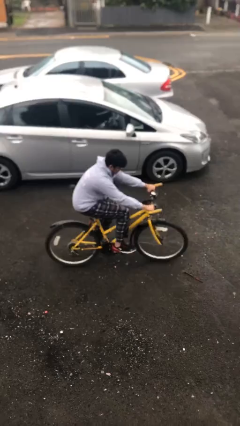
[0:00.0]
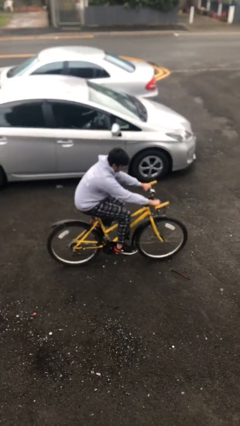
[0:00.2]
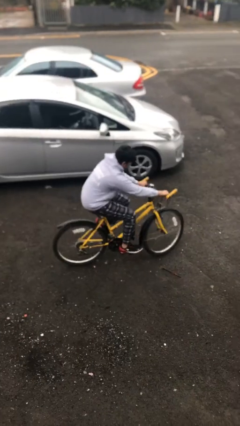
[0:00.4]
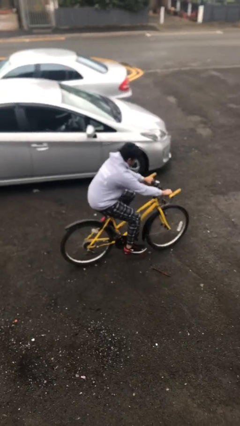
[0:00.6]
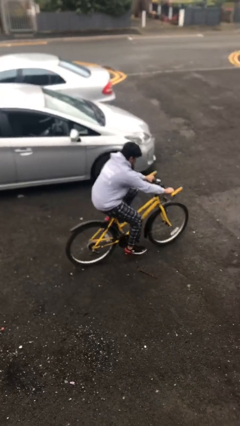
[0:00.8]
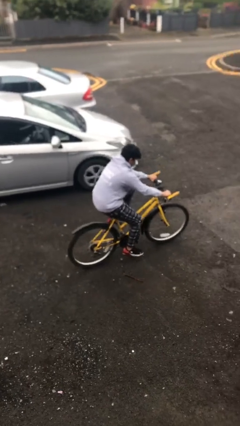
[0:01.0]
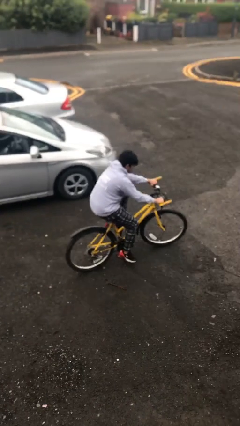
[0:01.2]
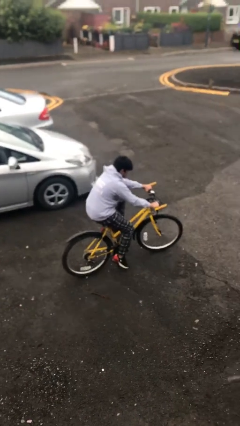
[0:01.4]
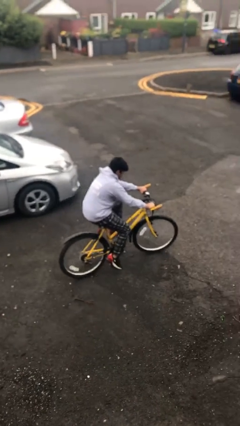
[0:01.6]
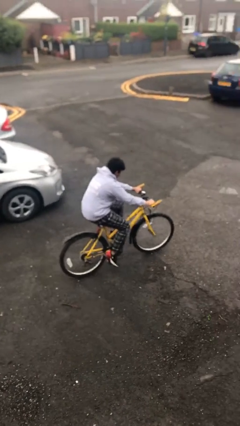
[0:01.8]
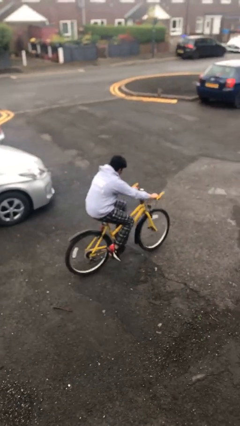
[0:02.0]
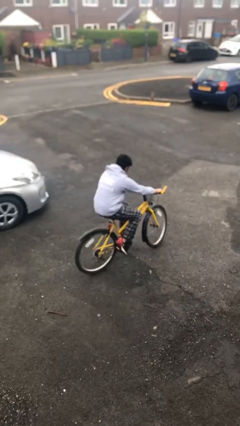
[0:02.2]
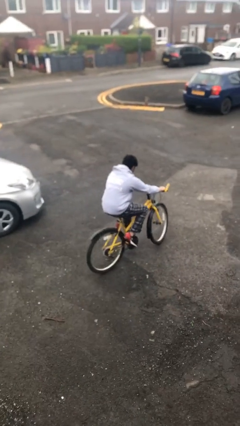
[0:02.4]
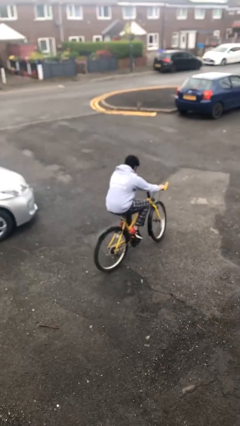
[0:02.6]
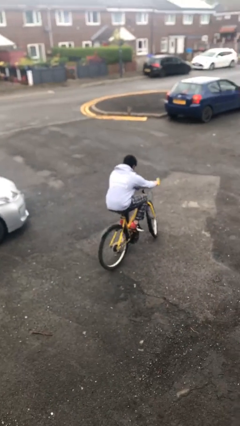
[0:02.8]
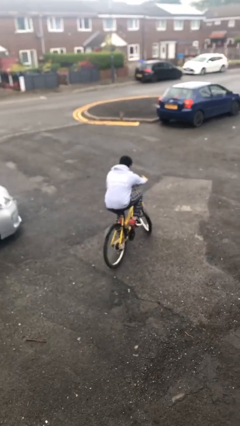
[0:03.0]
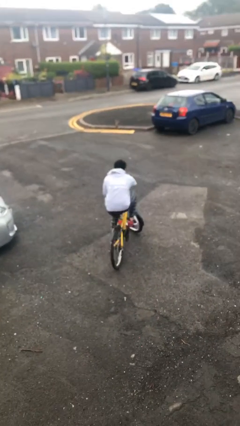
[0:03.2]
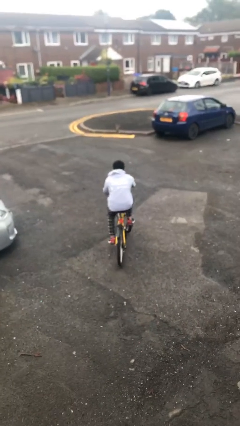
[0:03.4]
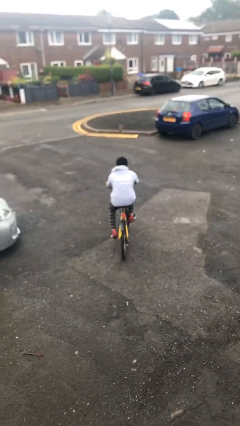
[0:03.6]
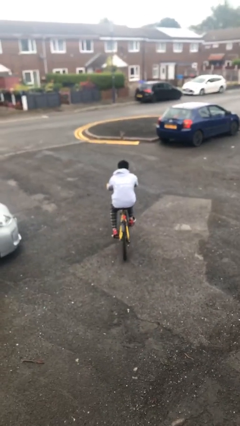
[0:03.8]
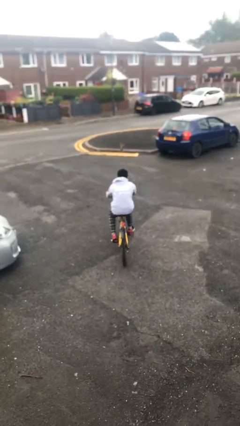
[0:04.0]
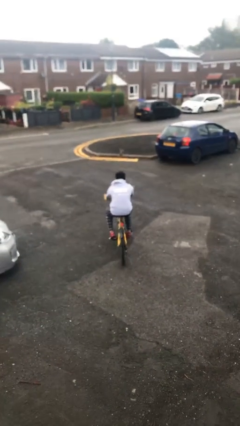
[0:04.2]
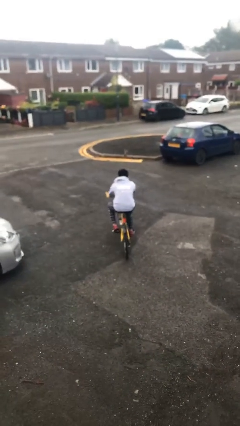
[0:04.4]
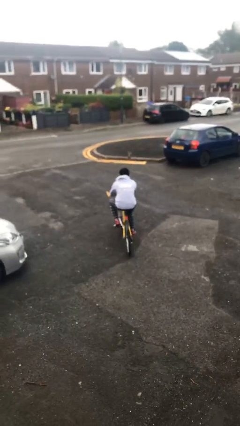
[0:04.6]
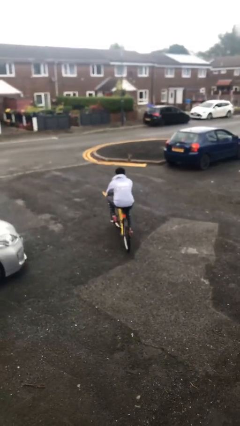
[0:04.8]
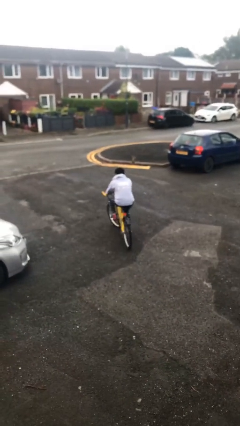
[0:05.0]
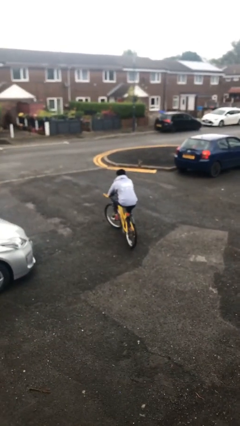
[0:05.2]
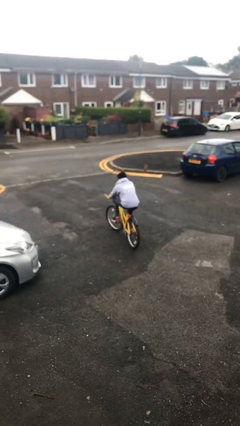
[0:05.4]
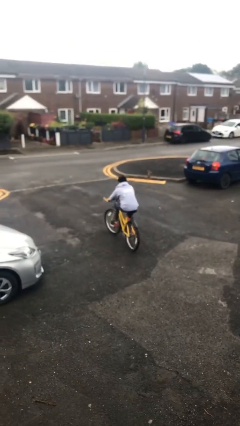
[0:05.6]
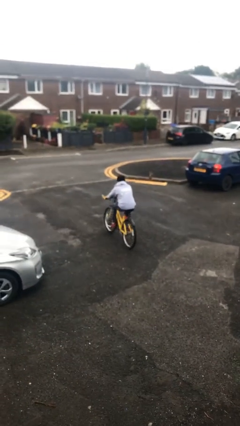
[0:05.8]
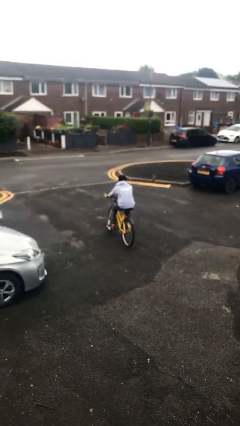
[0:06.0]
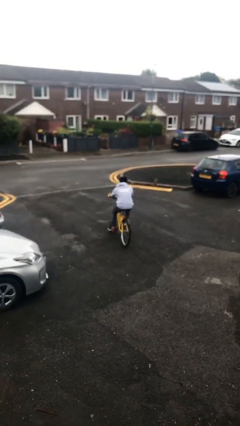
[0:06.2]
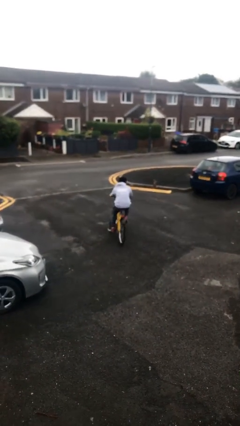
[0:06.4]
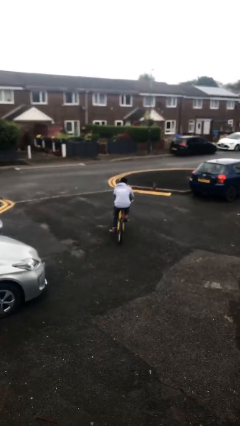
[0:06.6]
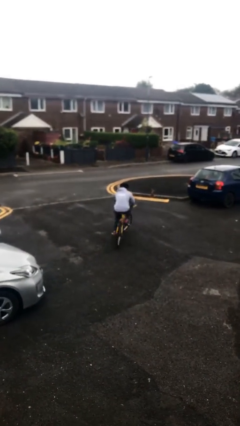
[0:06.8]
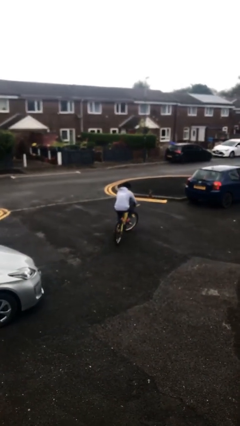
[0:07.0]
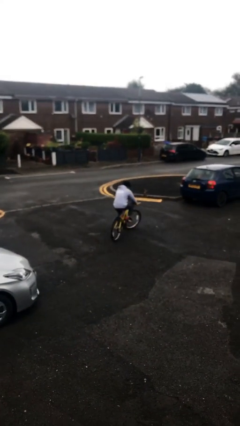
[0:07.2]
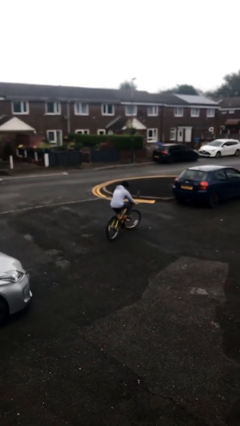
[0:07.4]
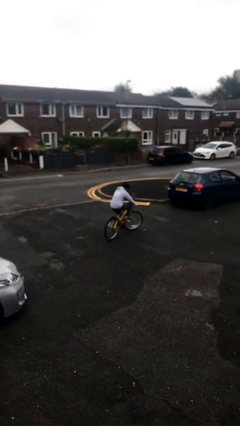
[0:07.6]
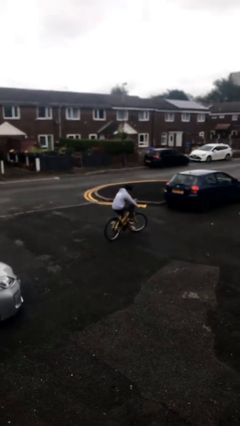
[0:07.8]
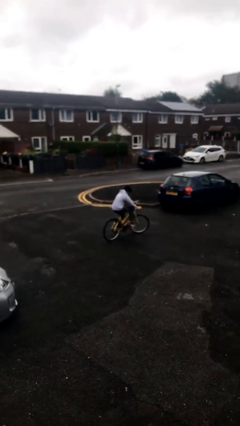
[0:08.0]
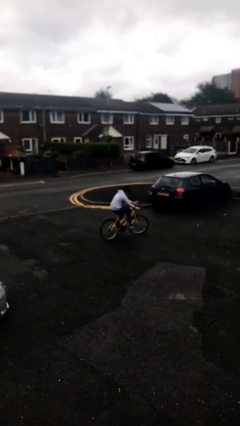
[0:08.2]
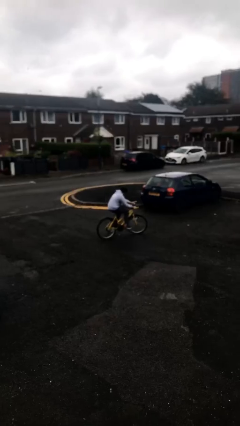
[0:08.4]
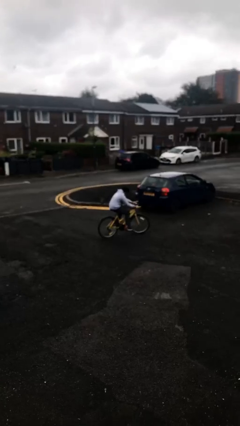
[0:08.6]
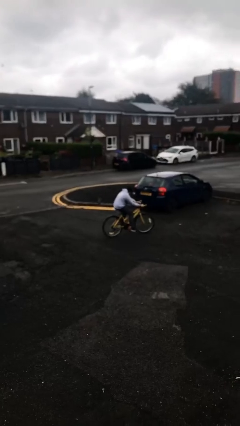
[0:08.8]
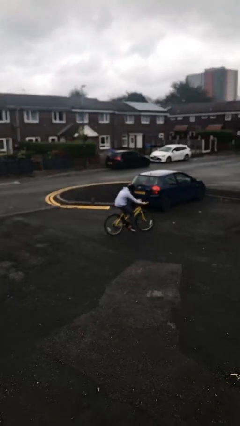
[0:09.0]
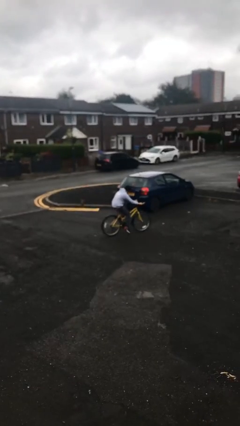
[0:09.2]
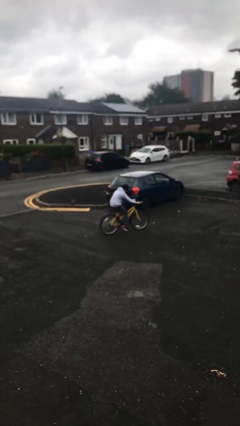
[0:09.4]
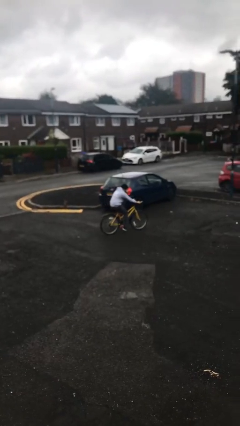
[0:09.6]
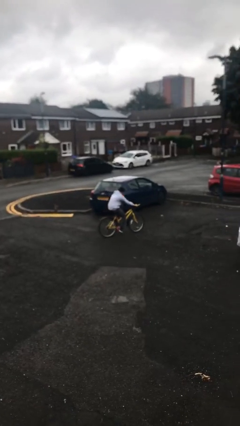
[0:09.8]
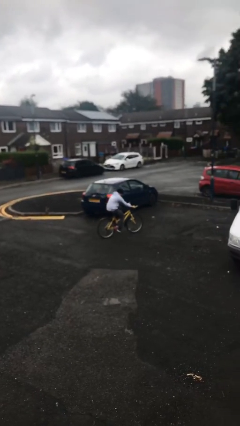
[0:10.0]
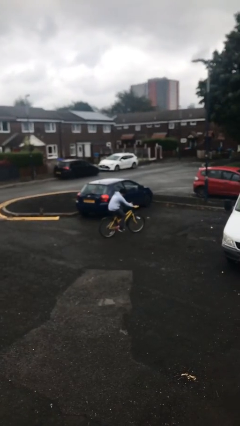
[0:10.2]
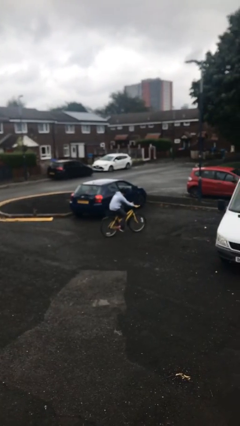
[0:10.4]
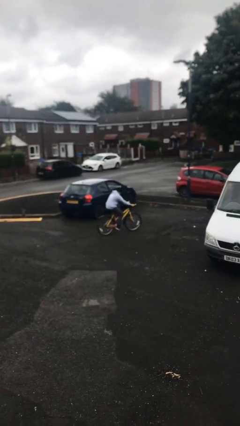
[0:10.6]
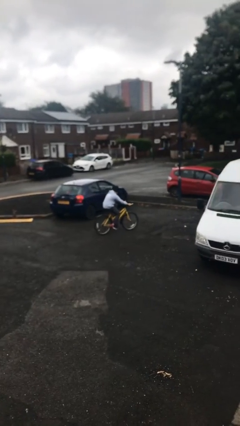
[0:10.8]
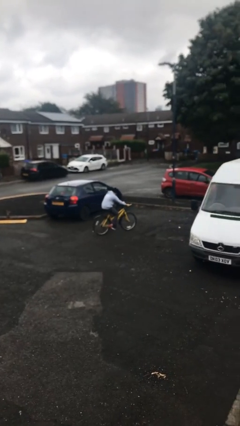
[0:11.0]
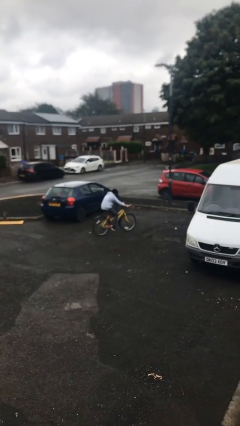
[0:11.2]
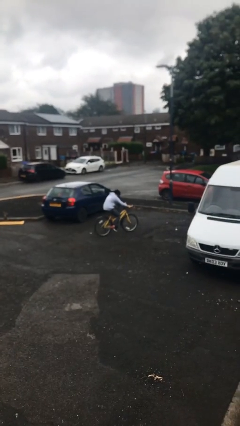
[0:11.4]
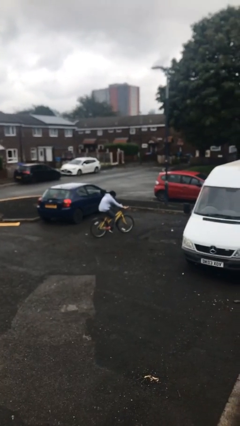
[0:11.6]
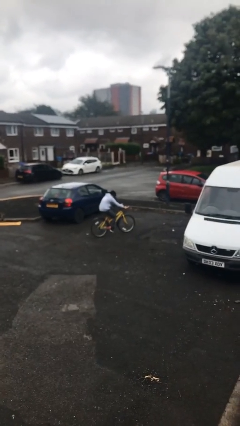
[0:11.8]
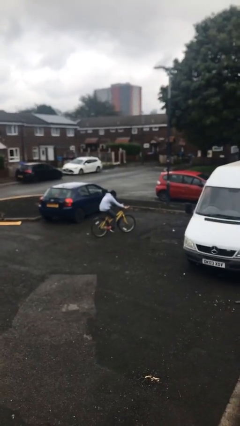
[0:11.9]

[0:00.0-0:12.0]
person rides bicycle

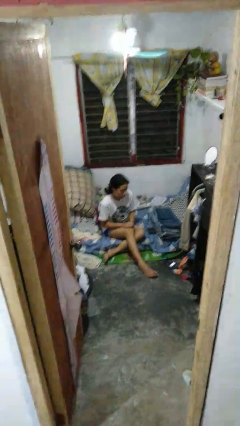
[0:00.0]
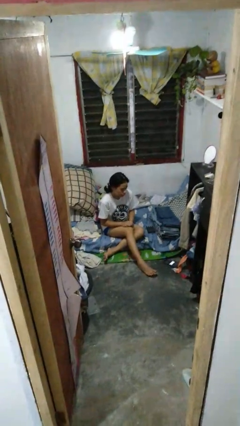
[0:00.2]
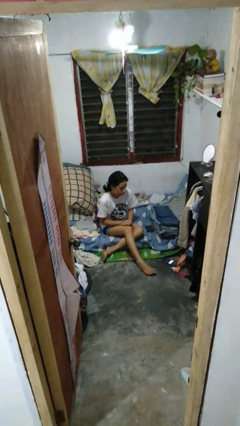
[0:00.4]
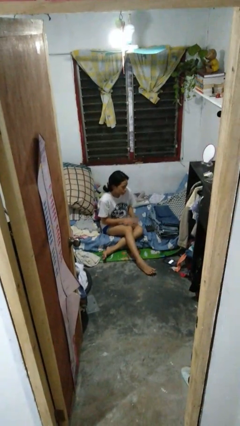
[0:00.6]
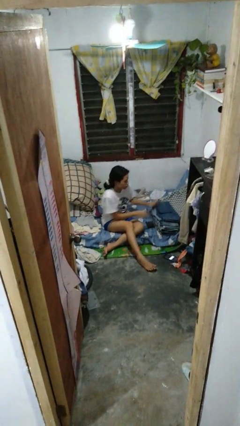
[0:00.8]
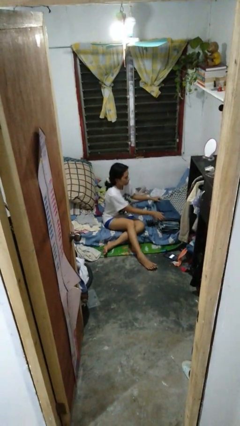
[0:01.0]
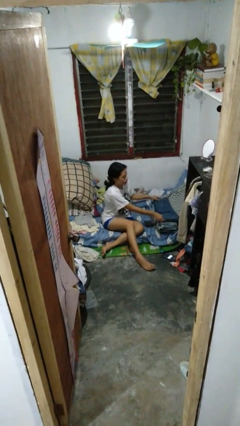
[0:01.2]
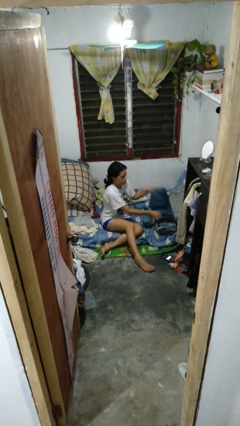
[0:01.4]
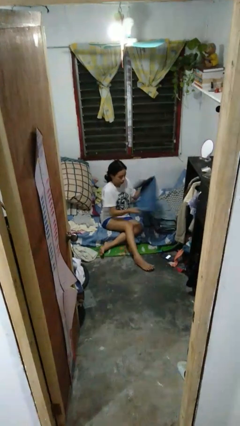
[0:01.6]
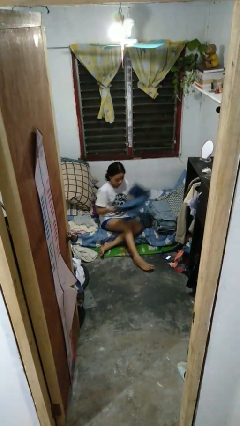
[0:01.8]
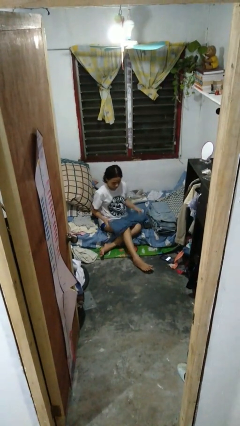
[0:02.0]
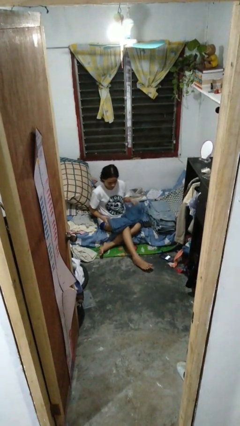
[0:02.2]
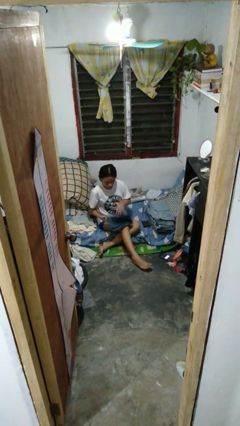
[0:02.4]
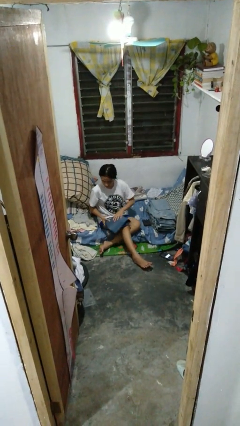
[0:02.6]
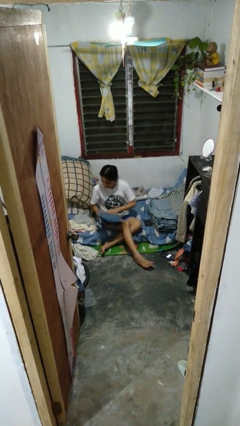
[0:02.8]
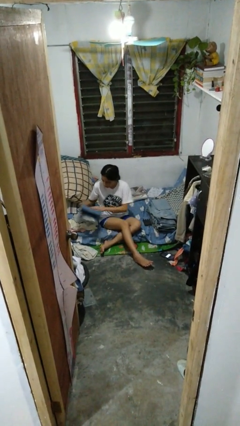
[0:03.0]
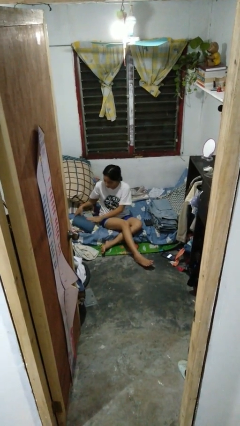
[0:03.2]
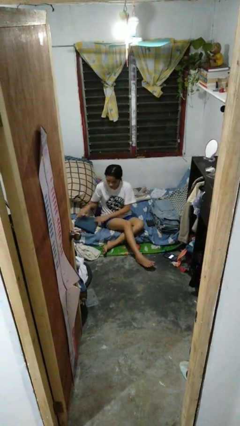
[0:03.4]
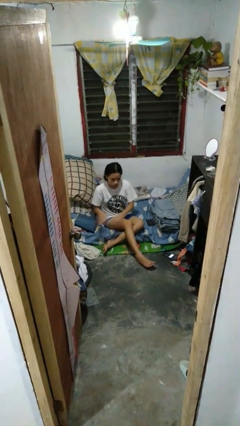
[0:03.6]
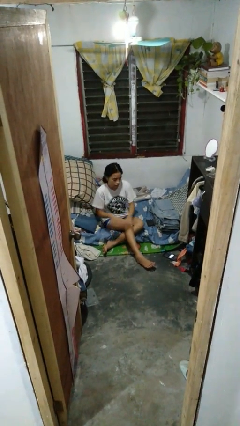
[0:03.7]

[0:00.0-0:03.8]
person folds pants

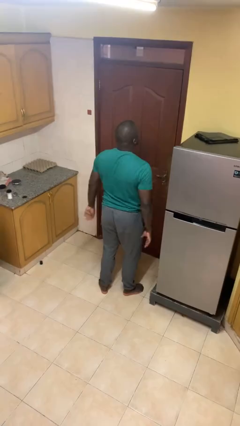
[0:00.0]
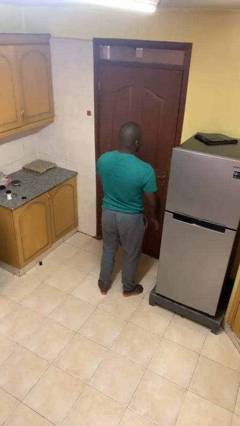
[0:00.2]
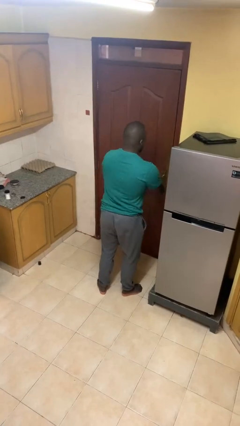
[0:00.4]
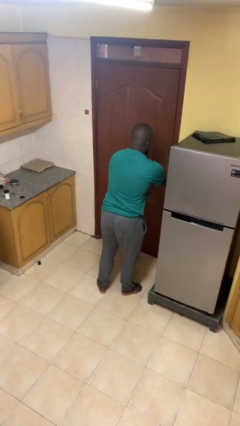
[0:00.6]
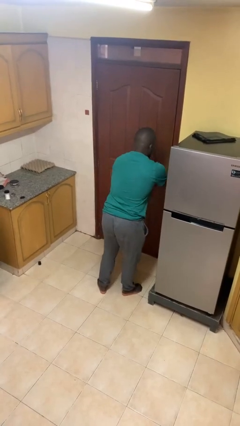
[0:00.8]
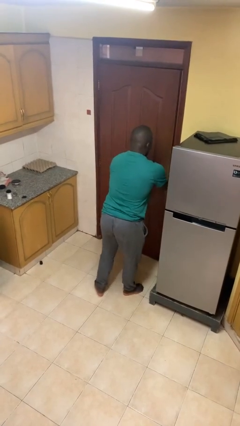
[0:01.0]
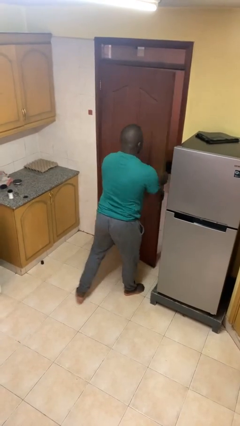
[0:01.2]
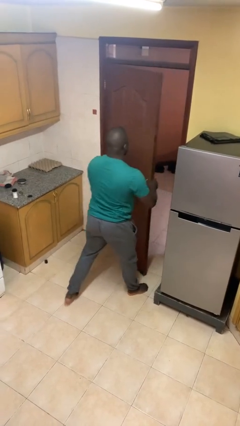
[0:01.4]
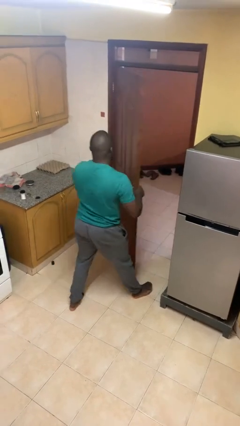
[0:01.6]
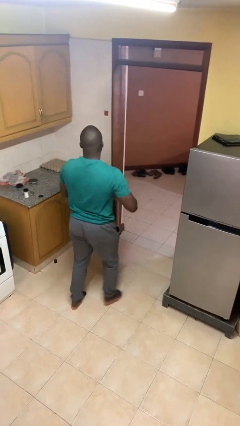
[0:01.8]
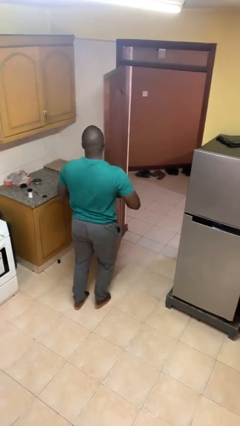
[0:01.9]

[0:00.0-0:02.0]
person opens facility door

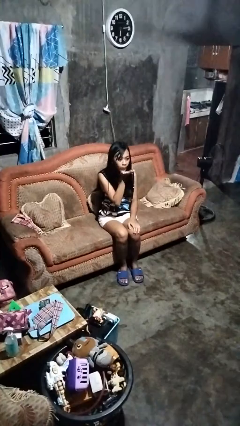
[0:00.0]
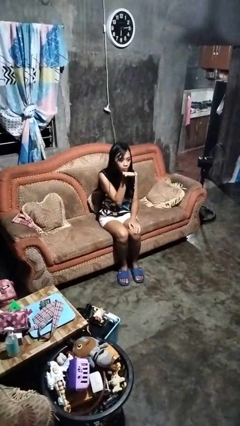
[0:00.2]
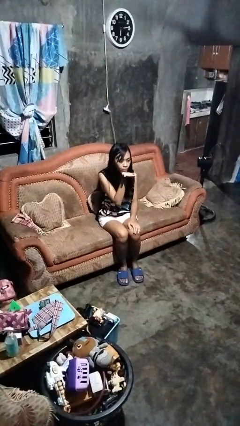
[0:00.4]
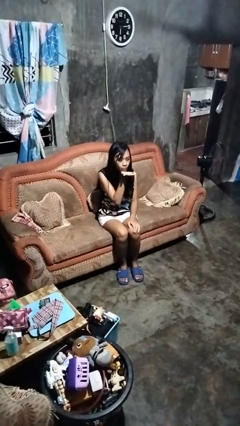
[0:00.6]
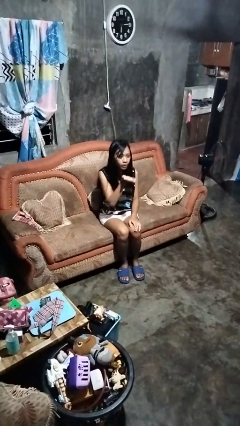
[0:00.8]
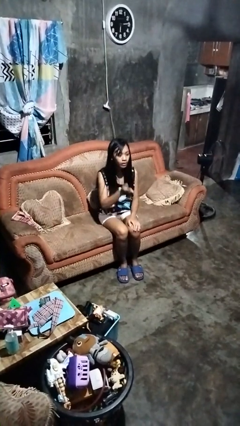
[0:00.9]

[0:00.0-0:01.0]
person gestures blow kiss
